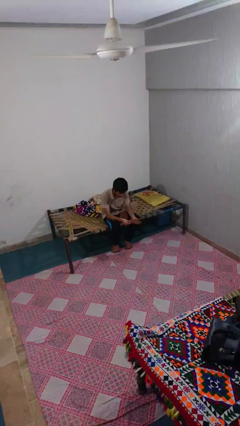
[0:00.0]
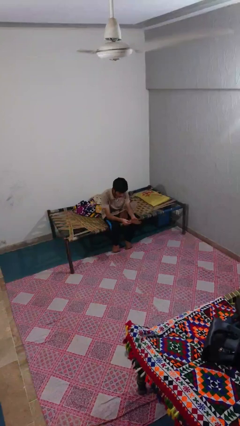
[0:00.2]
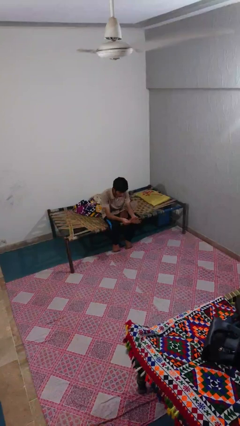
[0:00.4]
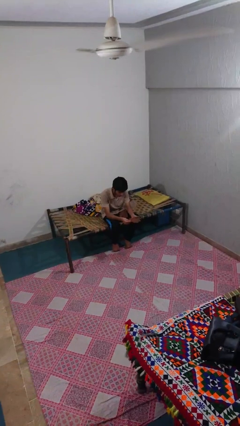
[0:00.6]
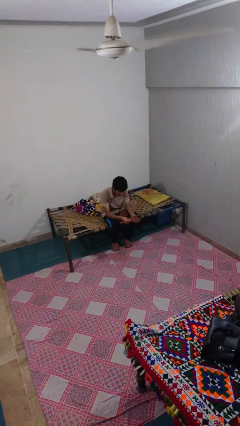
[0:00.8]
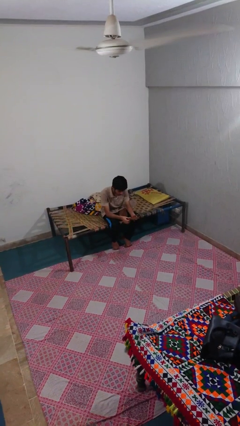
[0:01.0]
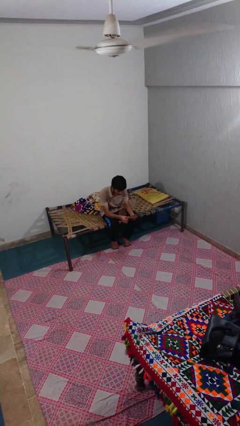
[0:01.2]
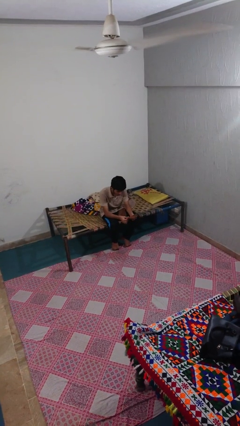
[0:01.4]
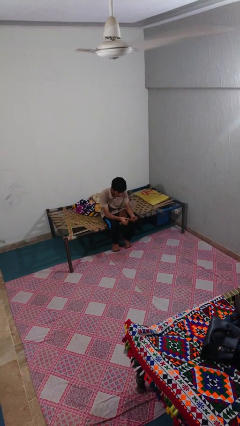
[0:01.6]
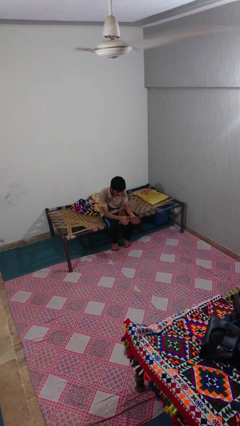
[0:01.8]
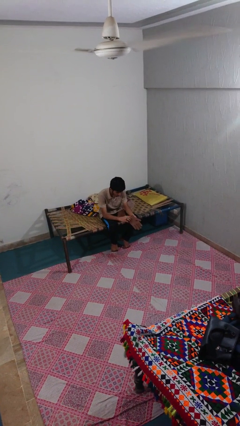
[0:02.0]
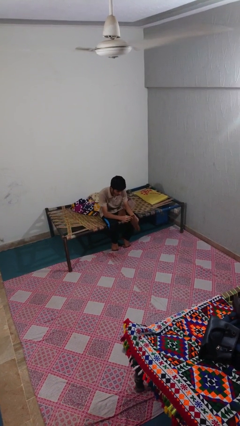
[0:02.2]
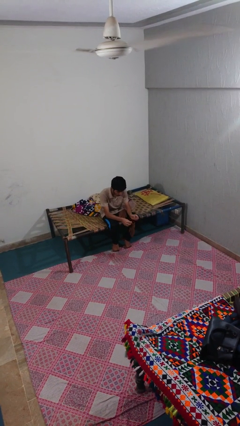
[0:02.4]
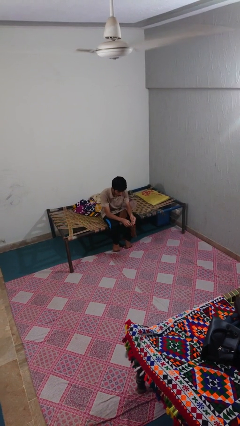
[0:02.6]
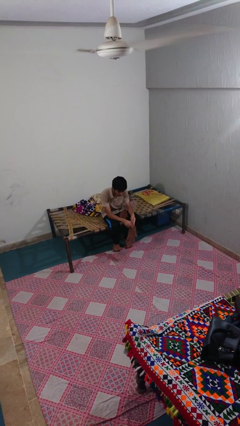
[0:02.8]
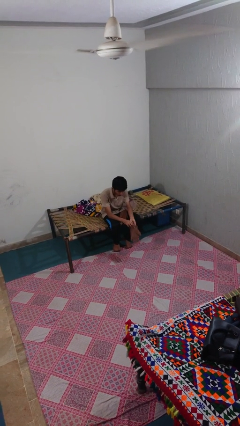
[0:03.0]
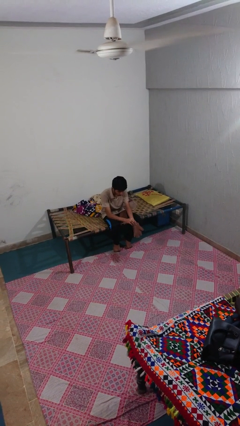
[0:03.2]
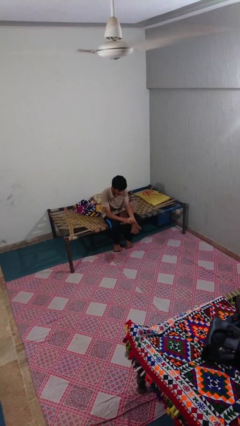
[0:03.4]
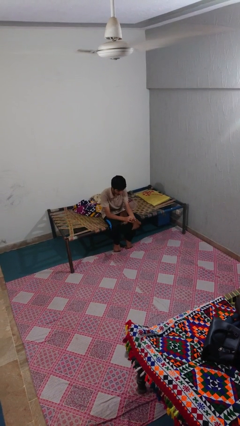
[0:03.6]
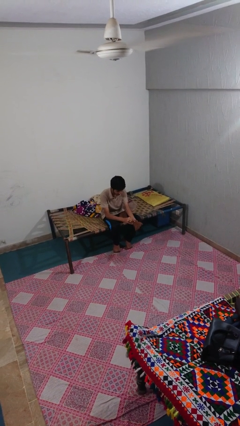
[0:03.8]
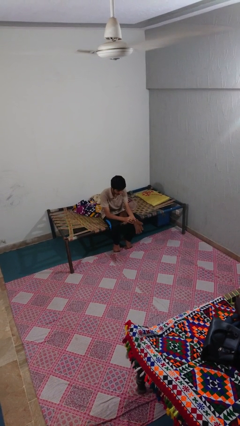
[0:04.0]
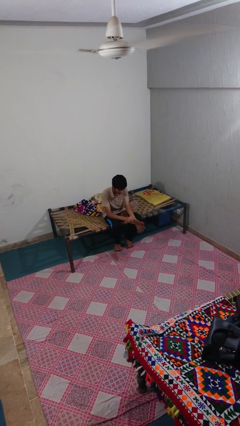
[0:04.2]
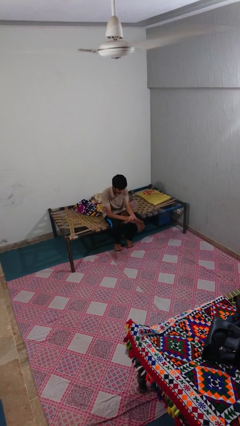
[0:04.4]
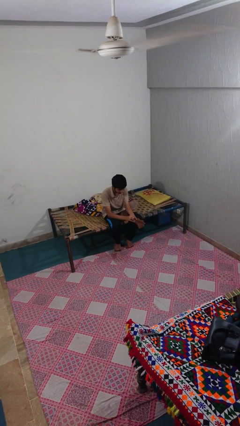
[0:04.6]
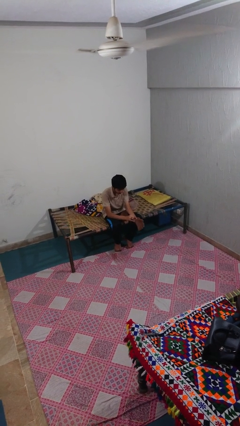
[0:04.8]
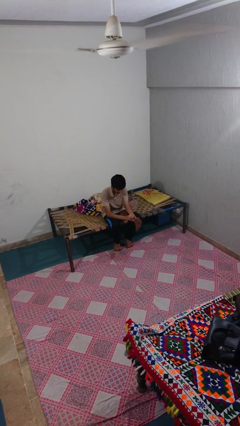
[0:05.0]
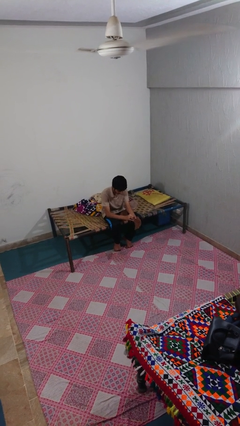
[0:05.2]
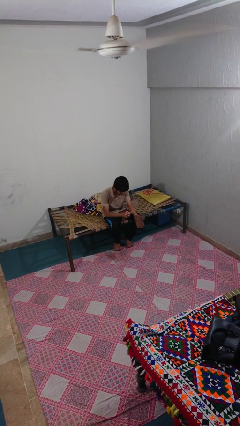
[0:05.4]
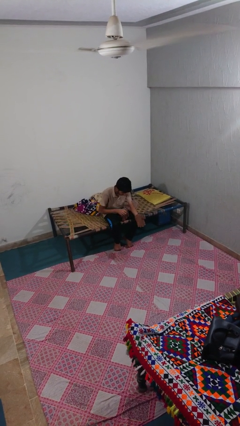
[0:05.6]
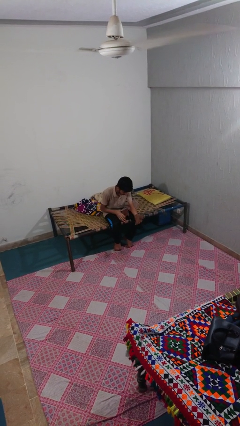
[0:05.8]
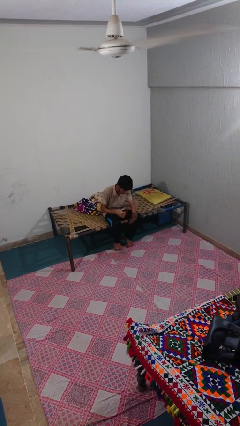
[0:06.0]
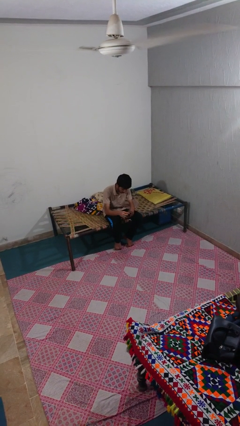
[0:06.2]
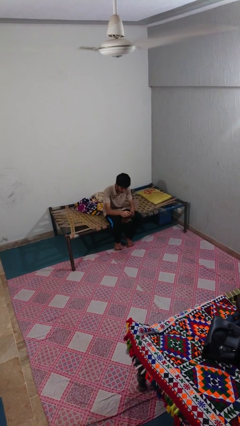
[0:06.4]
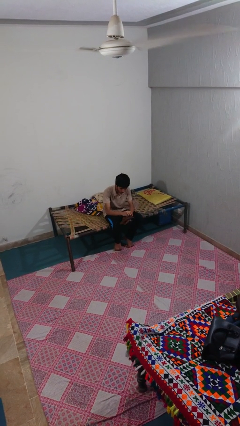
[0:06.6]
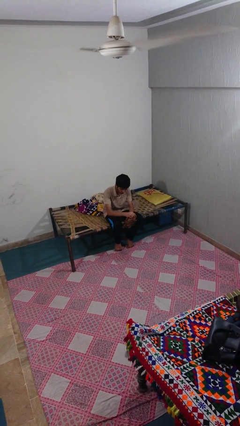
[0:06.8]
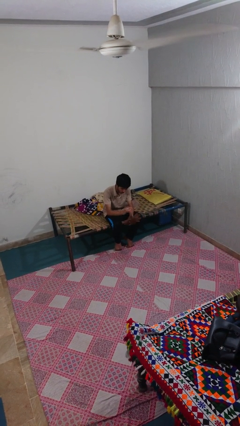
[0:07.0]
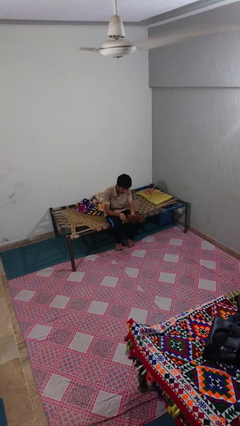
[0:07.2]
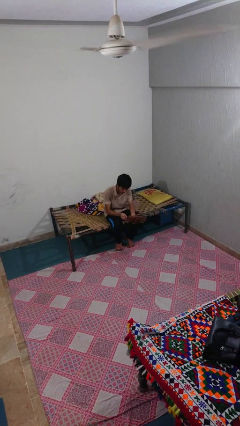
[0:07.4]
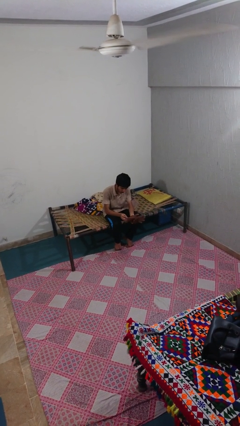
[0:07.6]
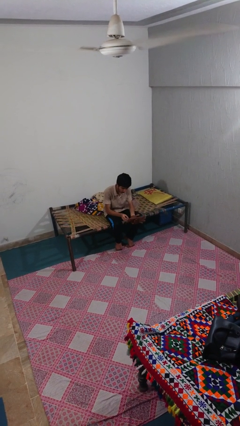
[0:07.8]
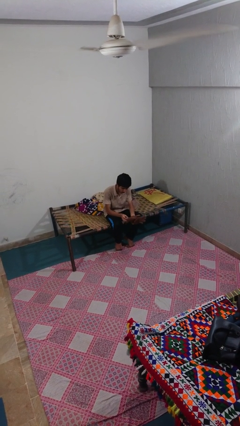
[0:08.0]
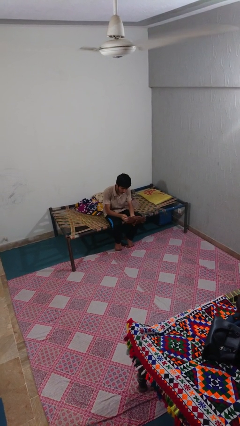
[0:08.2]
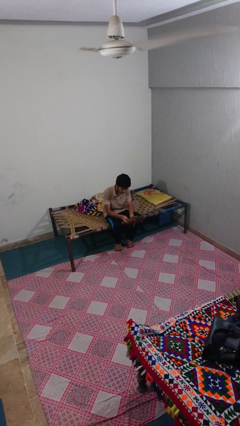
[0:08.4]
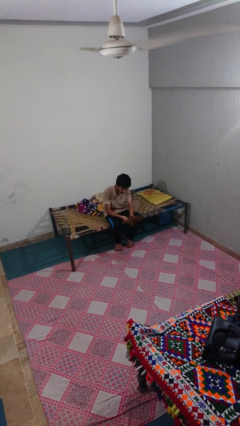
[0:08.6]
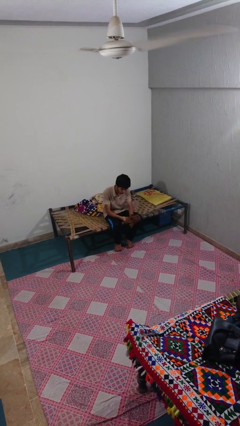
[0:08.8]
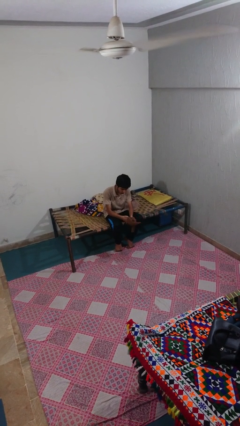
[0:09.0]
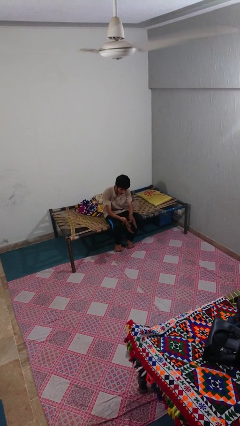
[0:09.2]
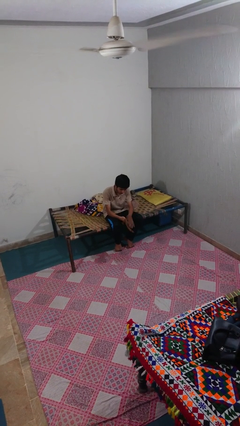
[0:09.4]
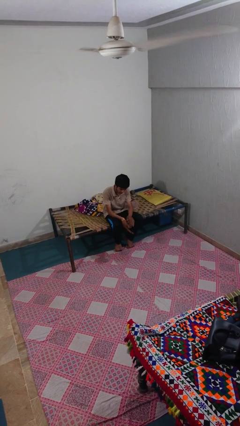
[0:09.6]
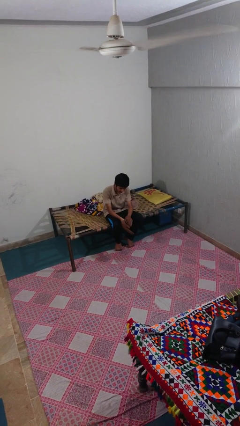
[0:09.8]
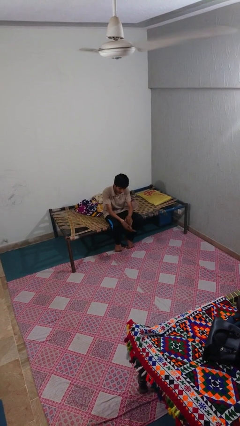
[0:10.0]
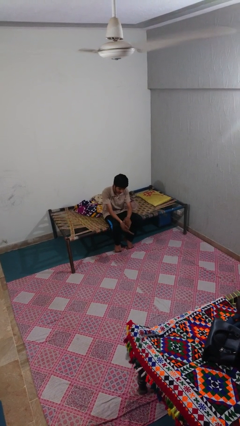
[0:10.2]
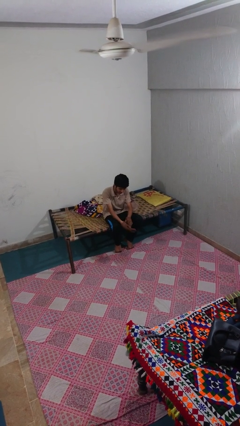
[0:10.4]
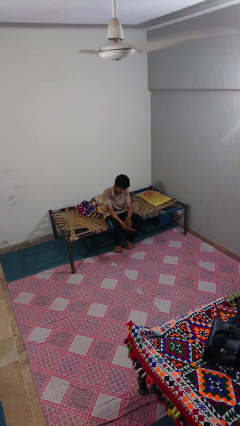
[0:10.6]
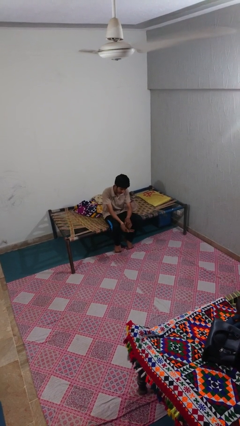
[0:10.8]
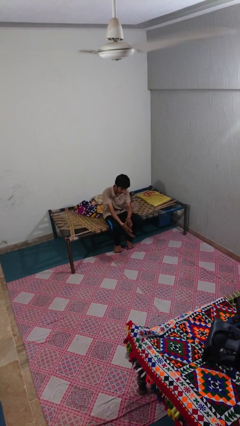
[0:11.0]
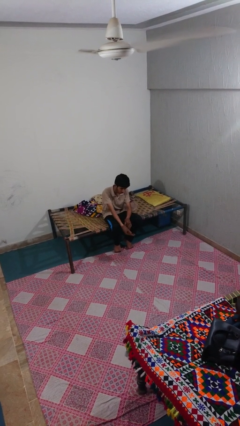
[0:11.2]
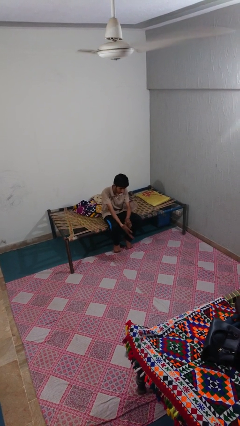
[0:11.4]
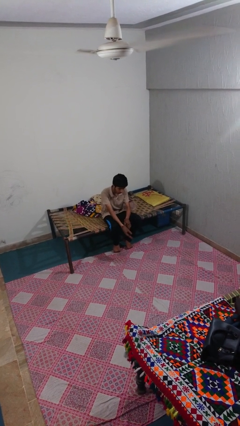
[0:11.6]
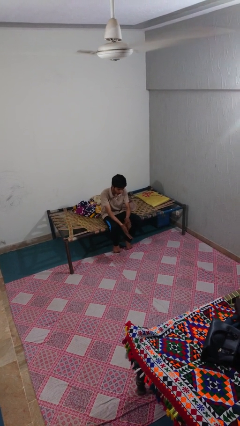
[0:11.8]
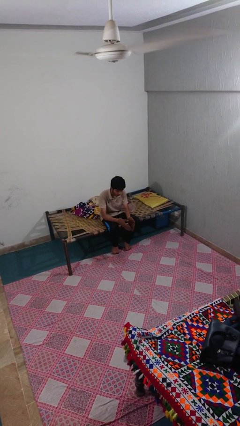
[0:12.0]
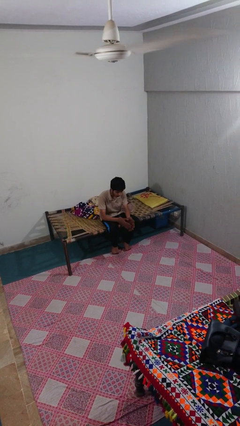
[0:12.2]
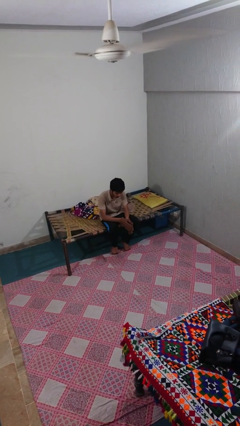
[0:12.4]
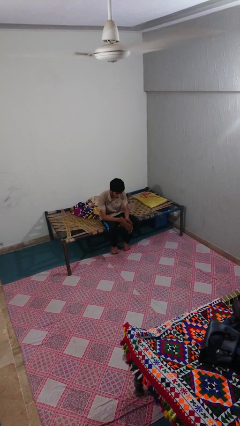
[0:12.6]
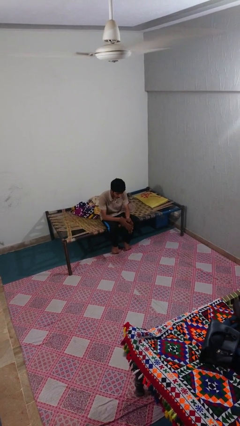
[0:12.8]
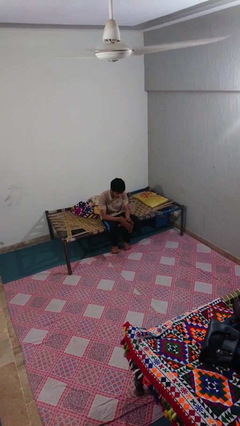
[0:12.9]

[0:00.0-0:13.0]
person puts on gloves

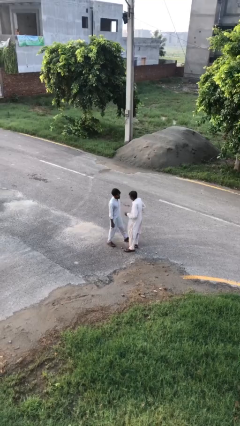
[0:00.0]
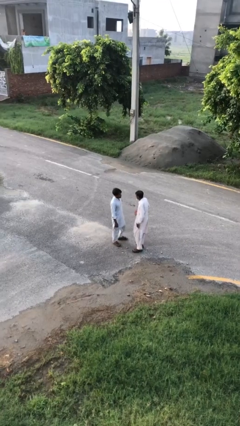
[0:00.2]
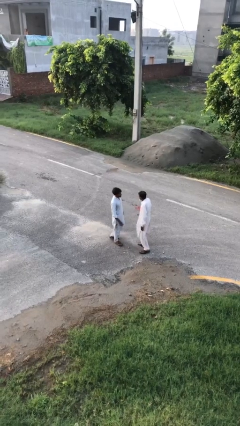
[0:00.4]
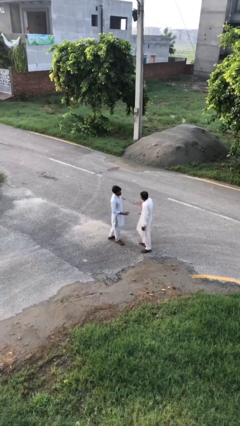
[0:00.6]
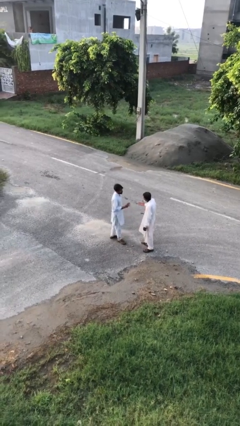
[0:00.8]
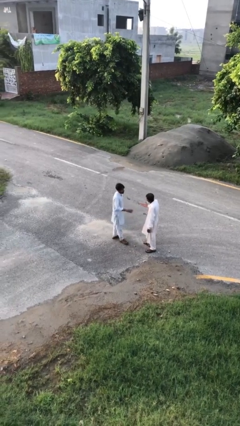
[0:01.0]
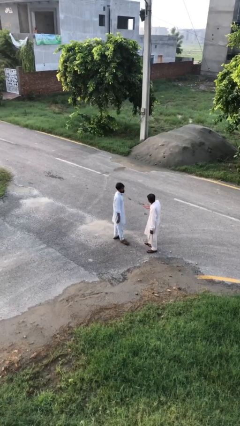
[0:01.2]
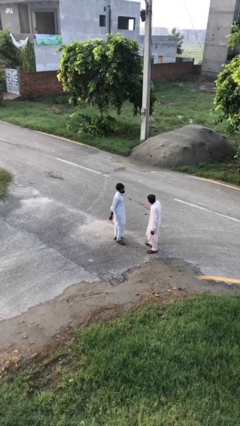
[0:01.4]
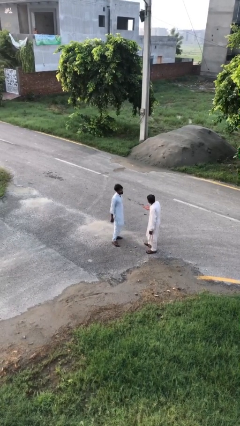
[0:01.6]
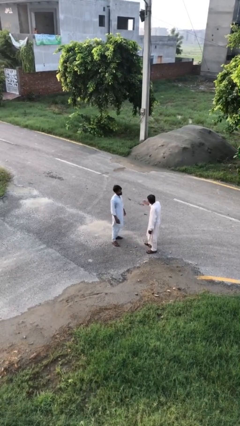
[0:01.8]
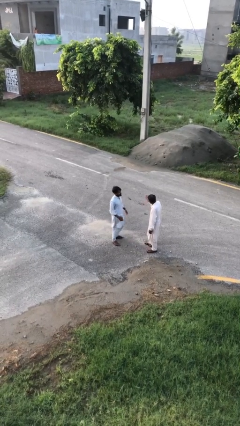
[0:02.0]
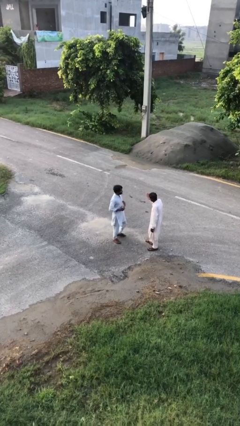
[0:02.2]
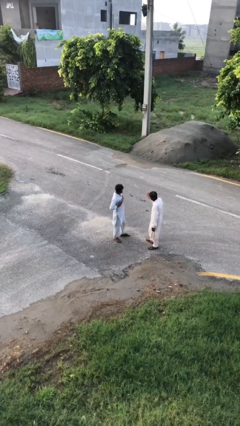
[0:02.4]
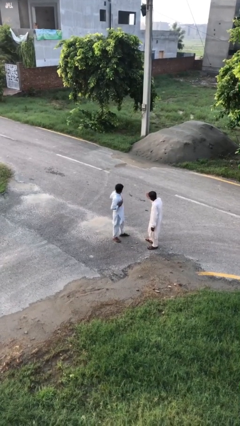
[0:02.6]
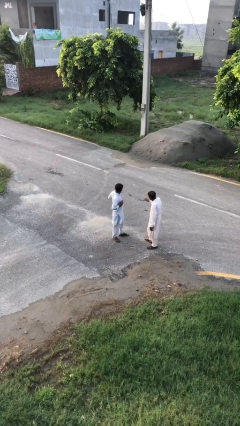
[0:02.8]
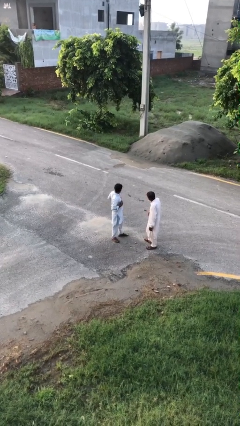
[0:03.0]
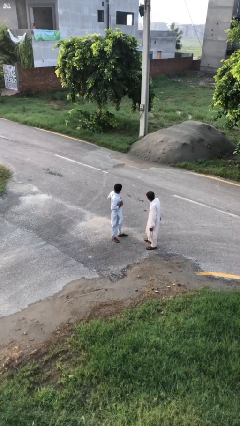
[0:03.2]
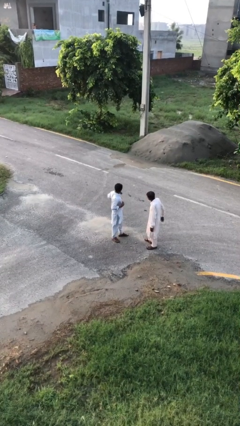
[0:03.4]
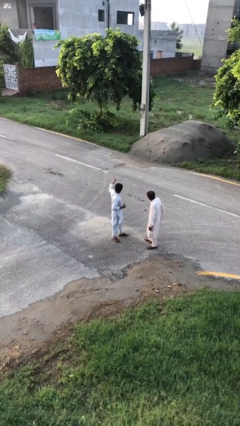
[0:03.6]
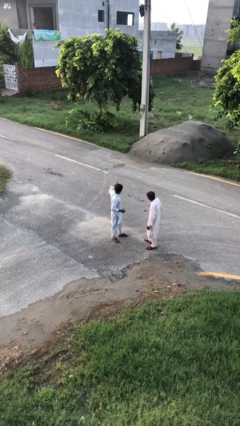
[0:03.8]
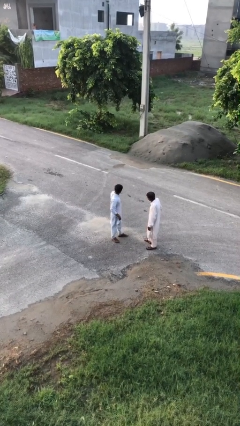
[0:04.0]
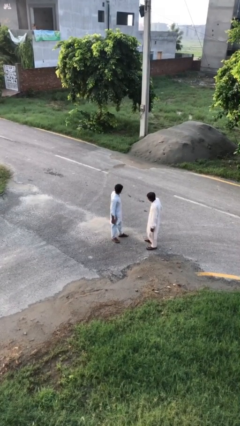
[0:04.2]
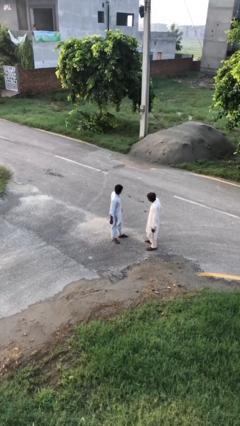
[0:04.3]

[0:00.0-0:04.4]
person talks to person

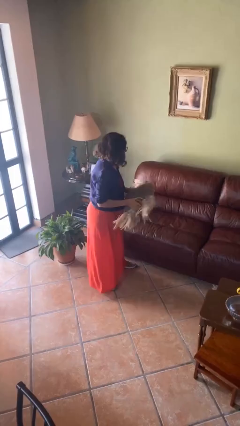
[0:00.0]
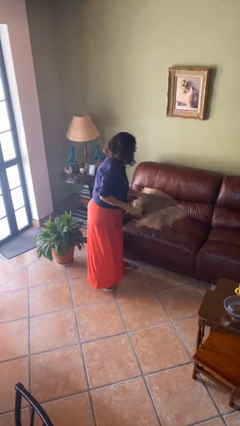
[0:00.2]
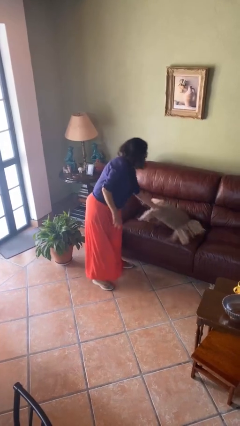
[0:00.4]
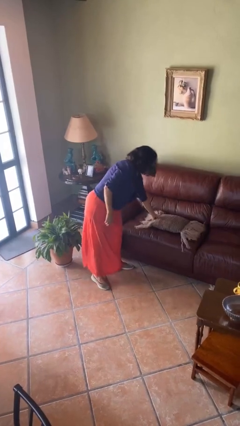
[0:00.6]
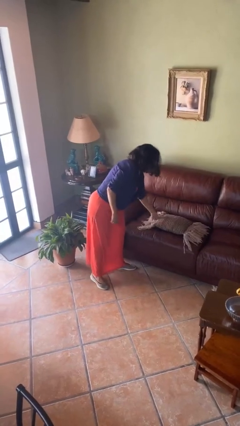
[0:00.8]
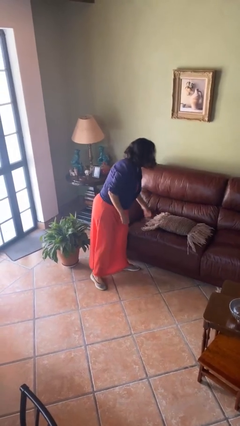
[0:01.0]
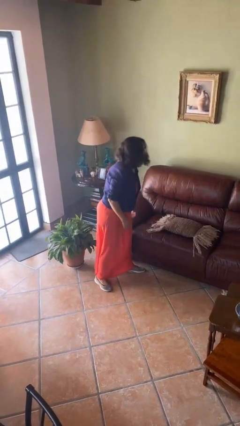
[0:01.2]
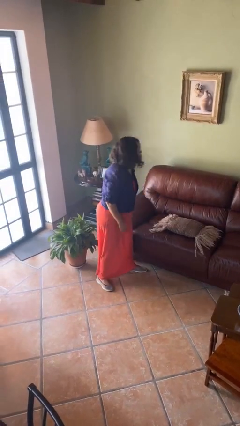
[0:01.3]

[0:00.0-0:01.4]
person puts down object on couch
